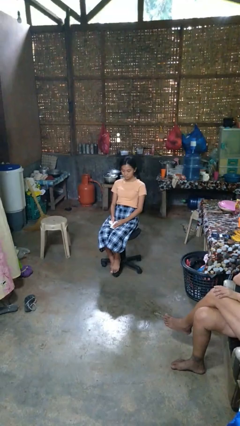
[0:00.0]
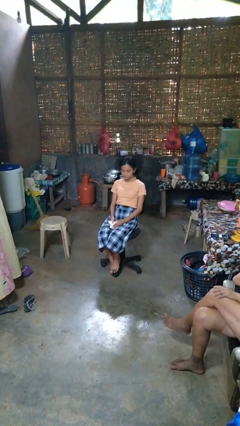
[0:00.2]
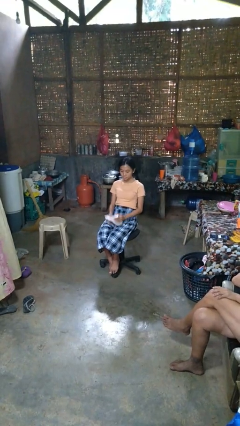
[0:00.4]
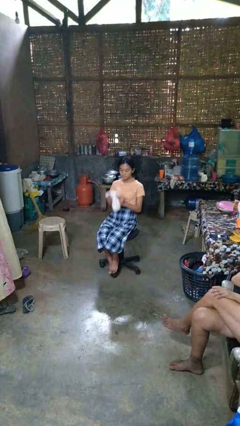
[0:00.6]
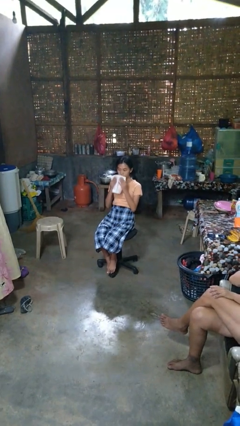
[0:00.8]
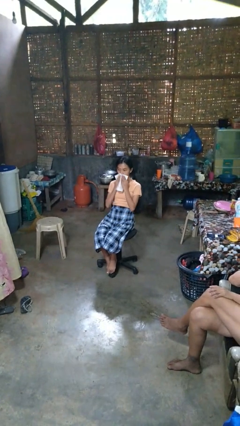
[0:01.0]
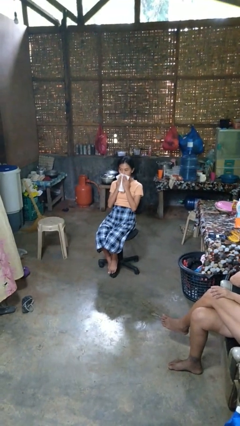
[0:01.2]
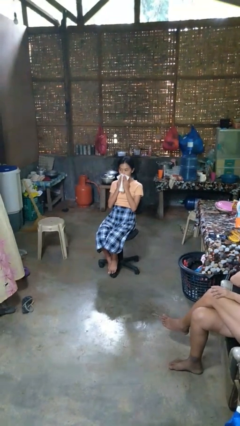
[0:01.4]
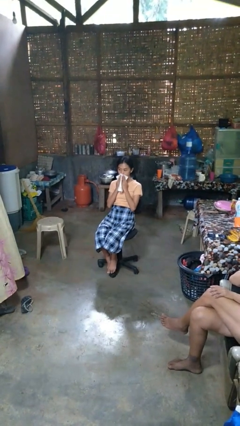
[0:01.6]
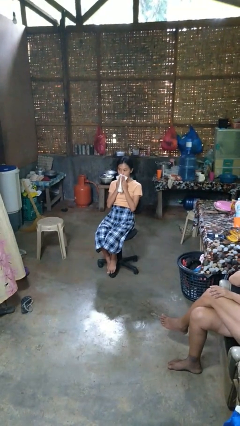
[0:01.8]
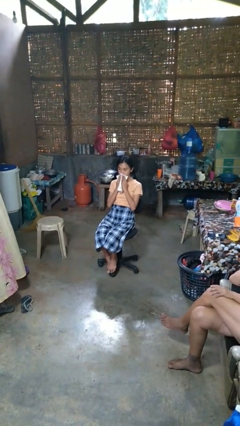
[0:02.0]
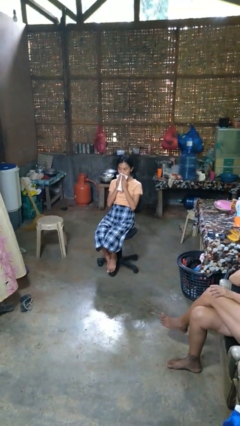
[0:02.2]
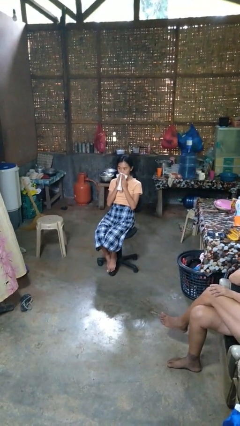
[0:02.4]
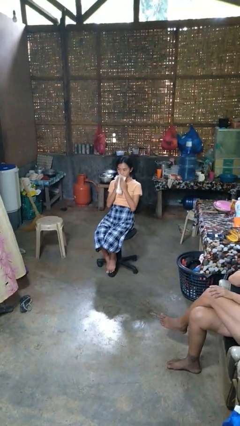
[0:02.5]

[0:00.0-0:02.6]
person wipes mouth with napkin

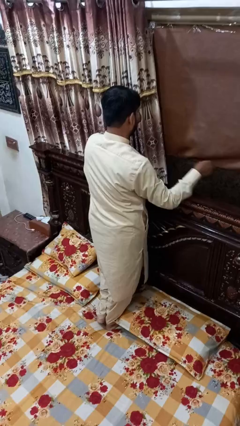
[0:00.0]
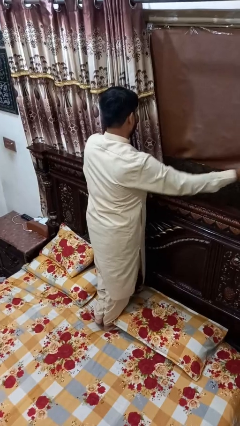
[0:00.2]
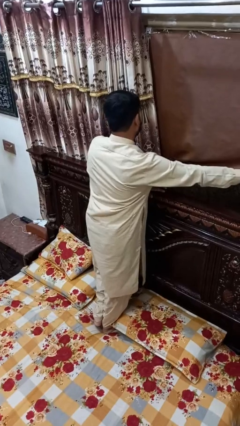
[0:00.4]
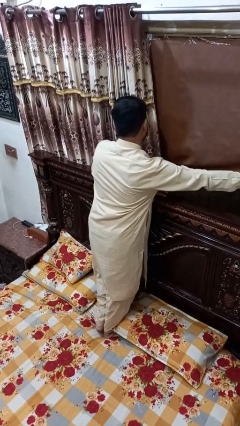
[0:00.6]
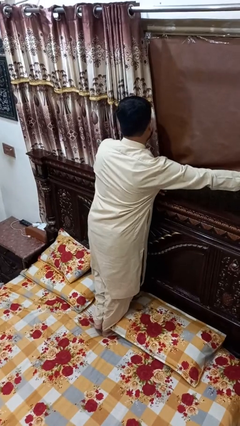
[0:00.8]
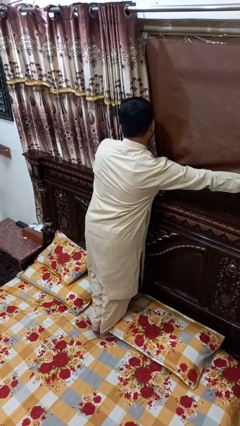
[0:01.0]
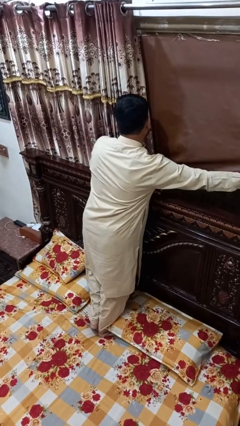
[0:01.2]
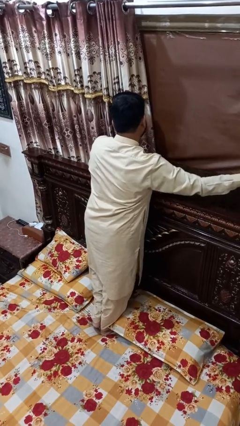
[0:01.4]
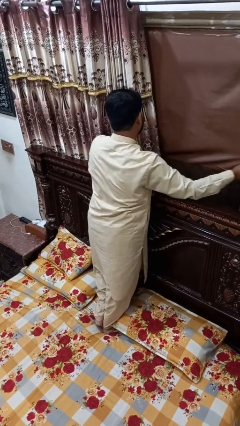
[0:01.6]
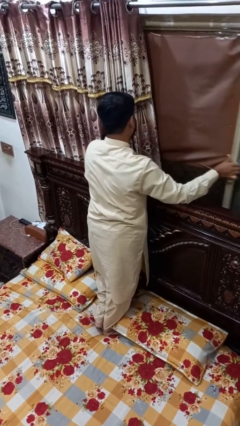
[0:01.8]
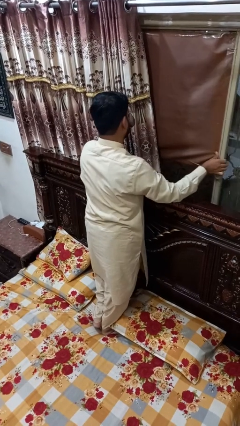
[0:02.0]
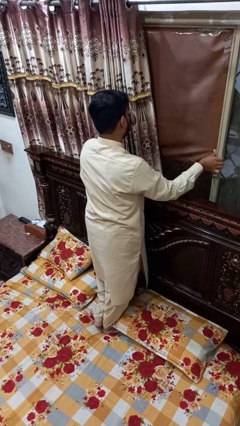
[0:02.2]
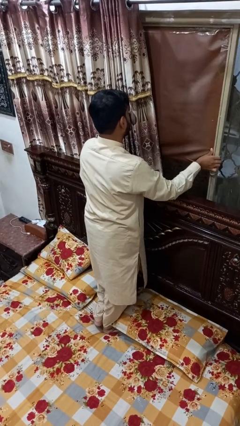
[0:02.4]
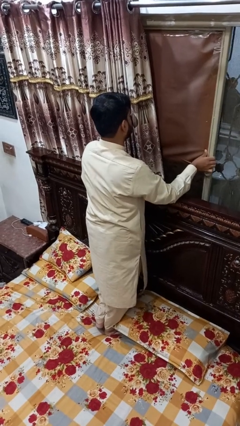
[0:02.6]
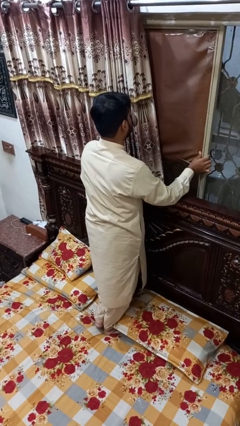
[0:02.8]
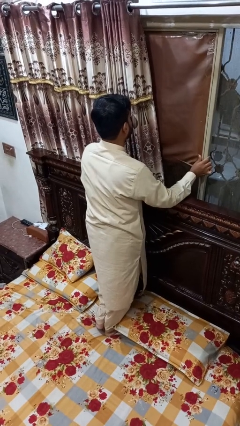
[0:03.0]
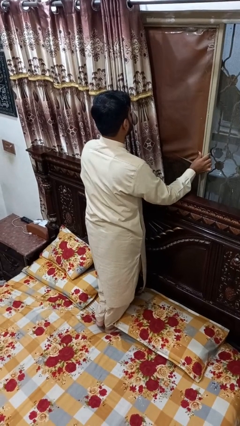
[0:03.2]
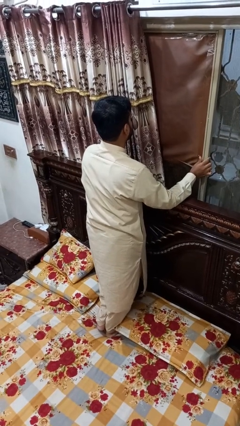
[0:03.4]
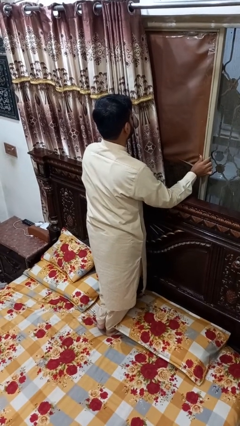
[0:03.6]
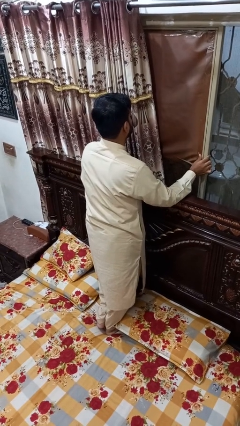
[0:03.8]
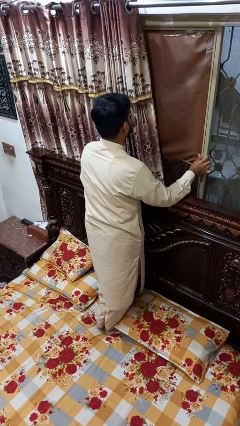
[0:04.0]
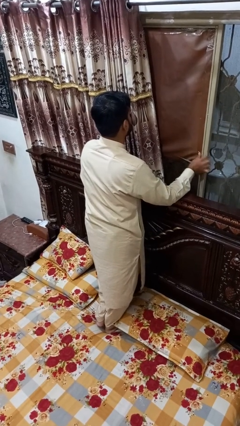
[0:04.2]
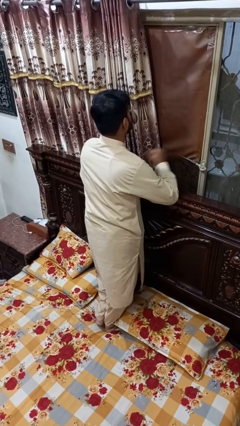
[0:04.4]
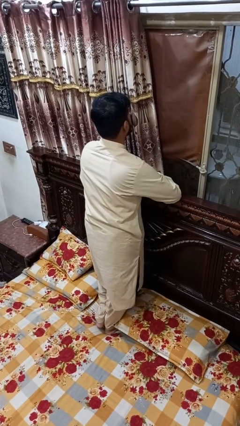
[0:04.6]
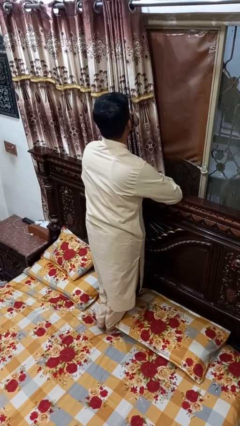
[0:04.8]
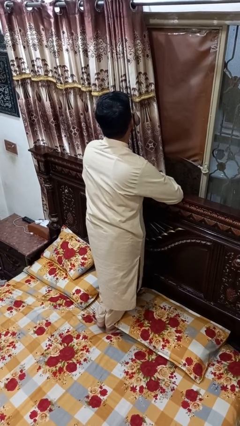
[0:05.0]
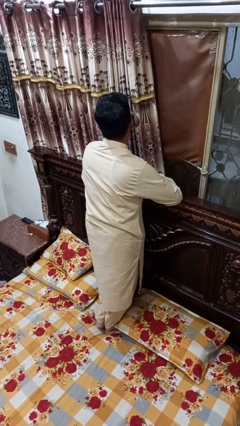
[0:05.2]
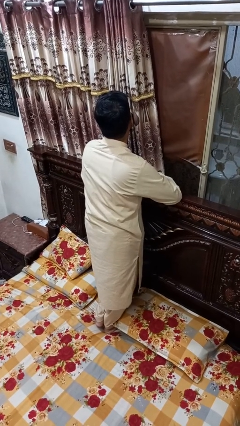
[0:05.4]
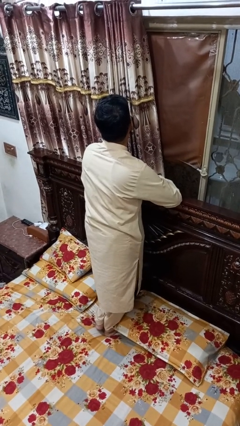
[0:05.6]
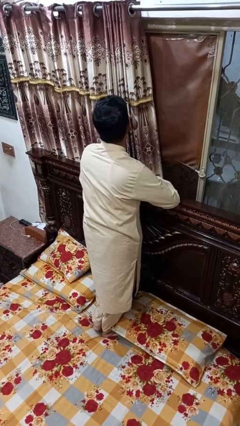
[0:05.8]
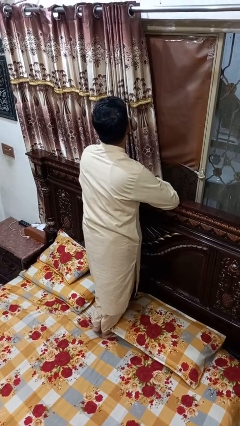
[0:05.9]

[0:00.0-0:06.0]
person opens home window

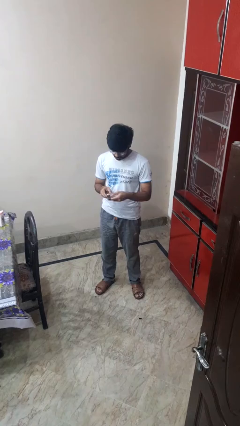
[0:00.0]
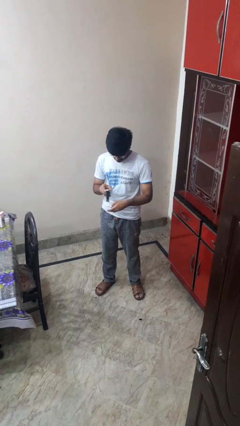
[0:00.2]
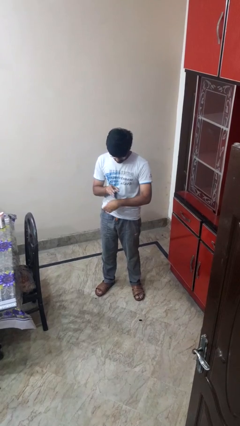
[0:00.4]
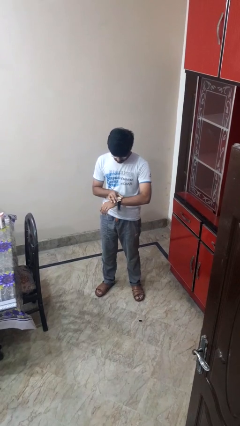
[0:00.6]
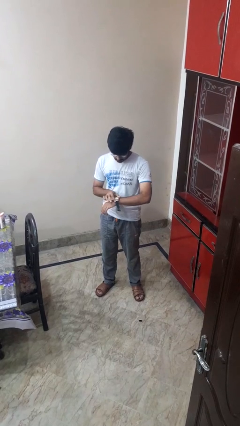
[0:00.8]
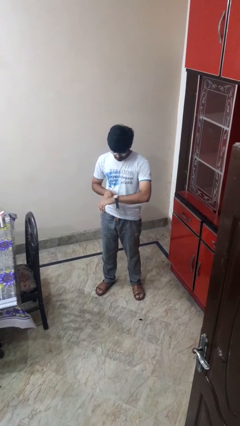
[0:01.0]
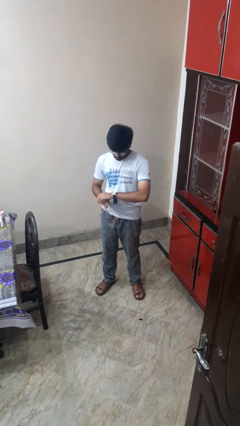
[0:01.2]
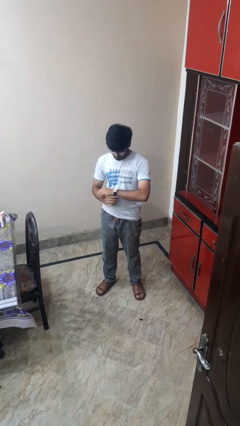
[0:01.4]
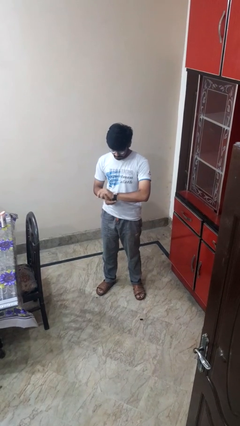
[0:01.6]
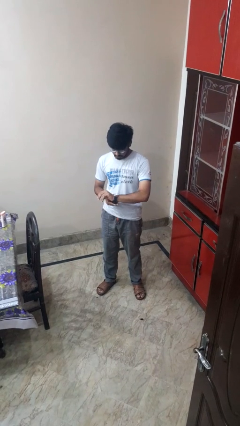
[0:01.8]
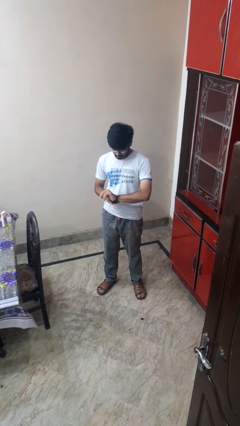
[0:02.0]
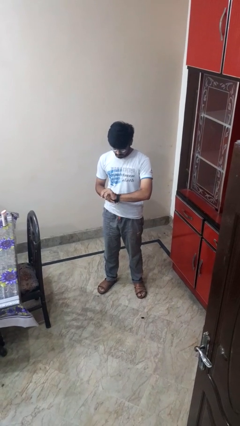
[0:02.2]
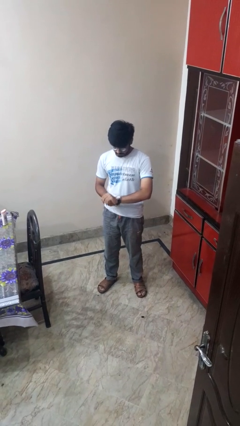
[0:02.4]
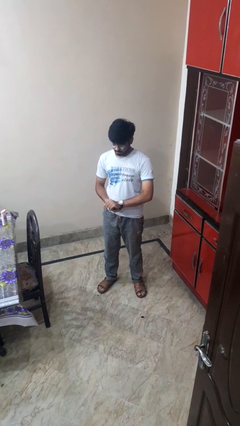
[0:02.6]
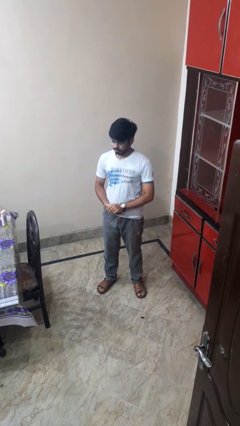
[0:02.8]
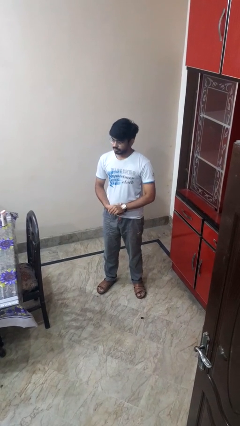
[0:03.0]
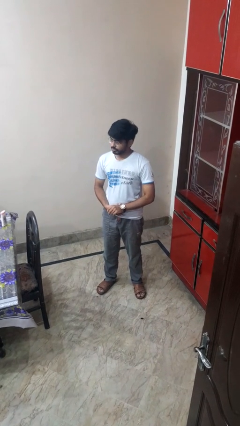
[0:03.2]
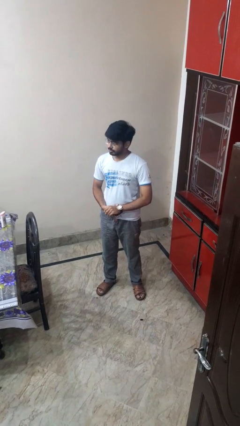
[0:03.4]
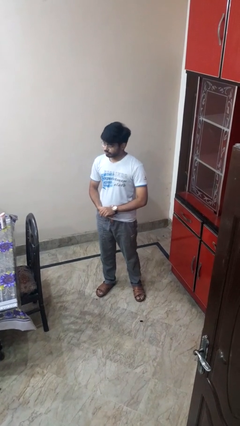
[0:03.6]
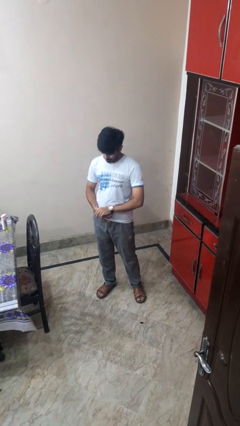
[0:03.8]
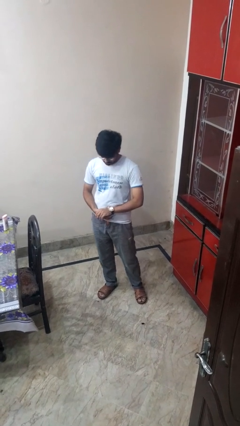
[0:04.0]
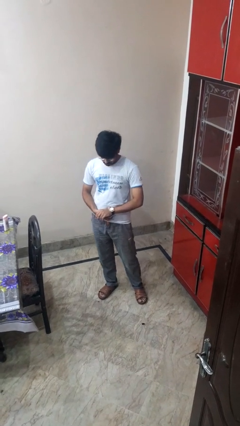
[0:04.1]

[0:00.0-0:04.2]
person puts on wristwatch

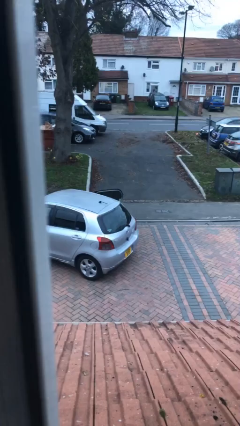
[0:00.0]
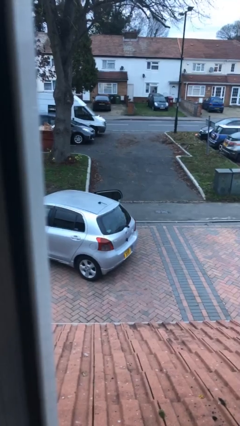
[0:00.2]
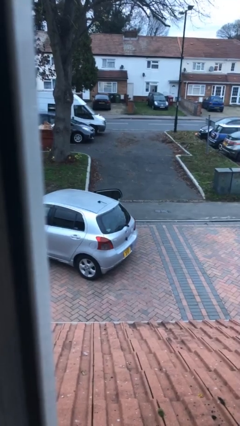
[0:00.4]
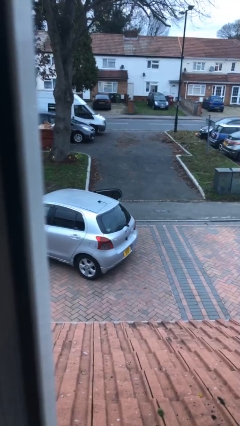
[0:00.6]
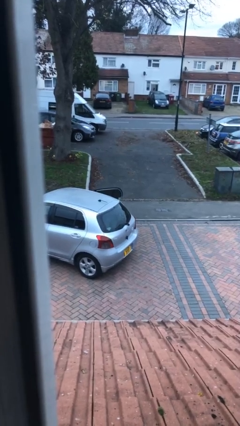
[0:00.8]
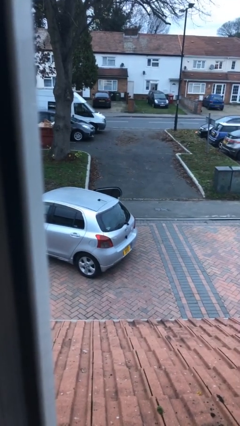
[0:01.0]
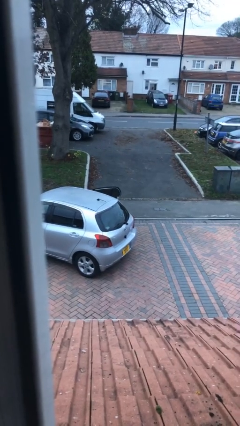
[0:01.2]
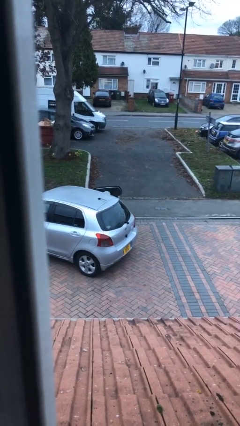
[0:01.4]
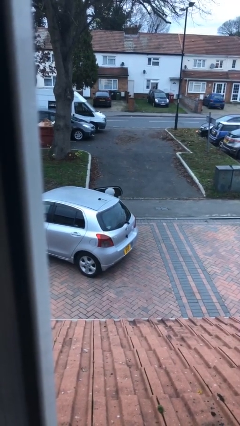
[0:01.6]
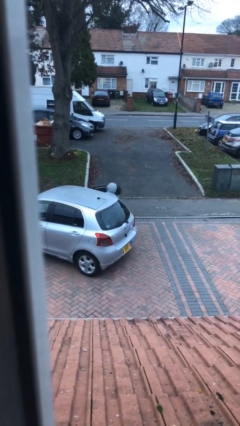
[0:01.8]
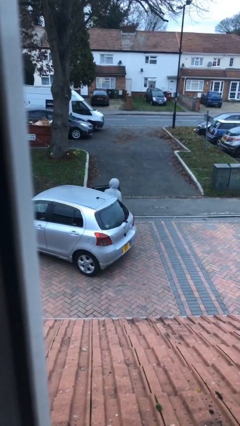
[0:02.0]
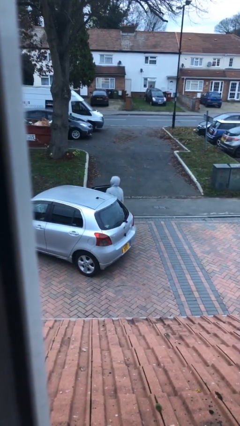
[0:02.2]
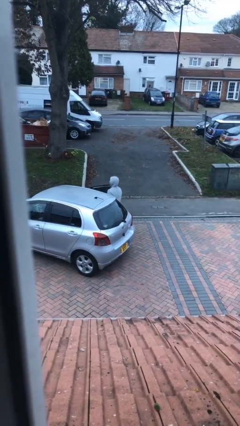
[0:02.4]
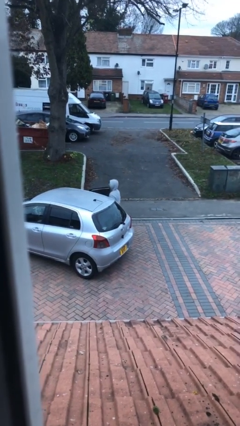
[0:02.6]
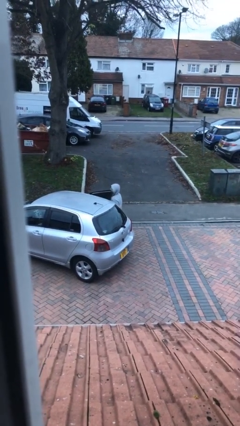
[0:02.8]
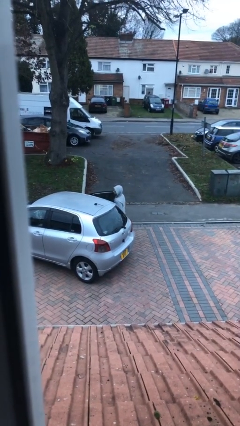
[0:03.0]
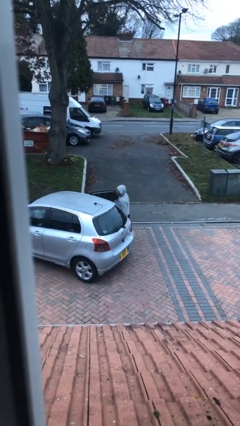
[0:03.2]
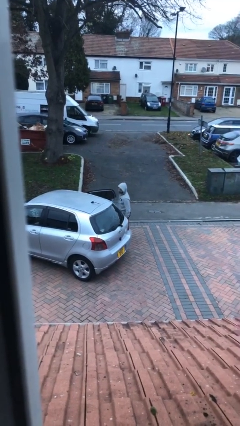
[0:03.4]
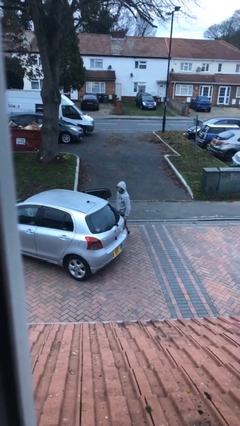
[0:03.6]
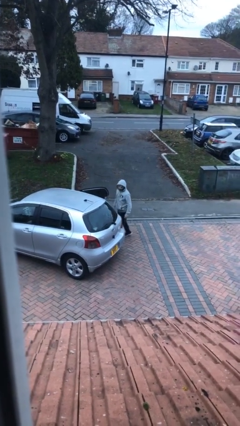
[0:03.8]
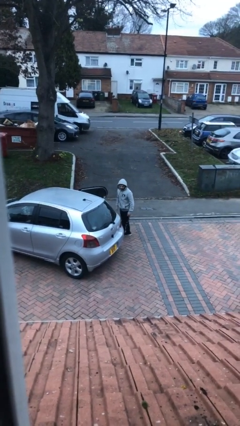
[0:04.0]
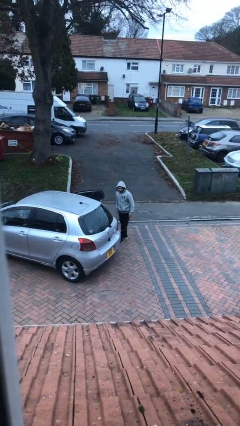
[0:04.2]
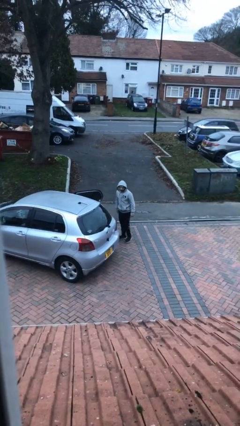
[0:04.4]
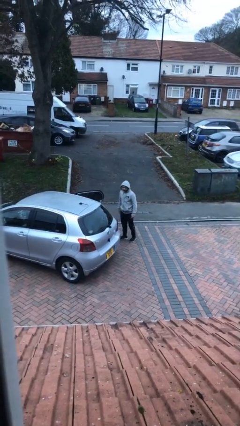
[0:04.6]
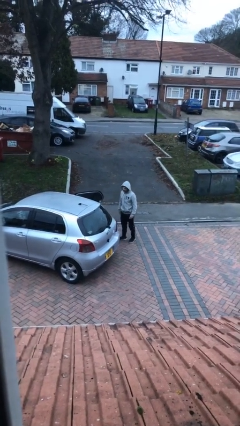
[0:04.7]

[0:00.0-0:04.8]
person exits car
